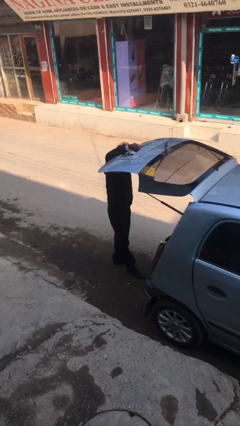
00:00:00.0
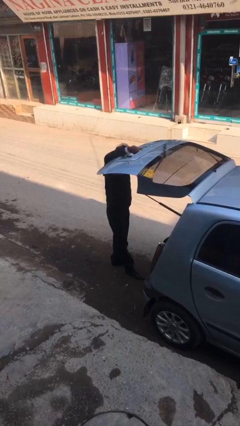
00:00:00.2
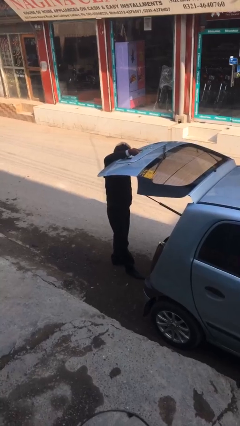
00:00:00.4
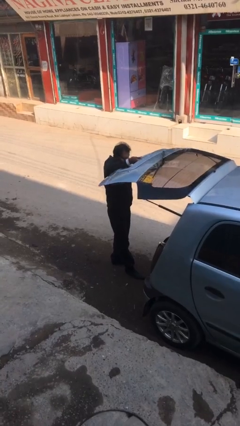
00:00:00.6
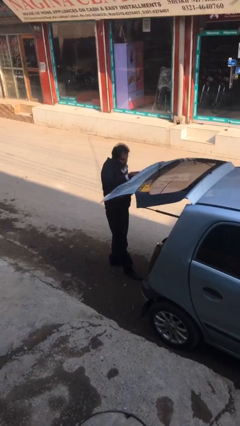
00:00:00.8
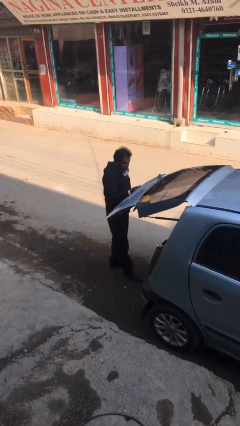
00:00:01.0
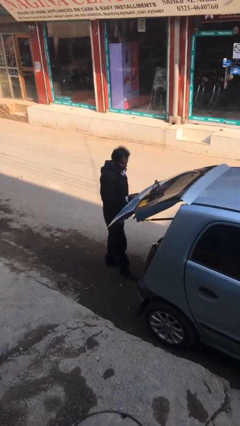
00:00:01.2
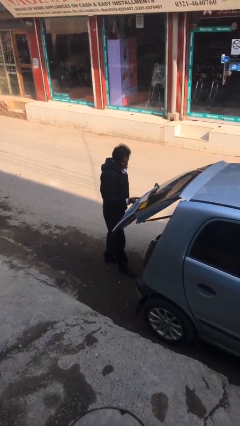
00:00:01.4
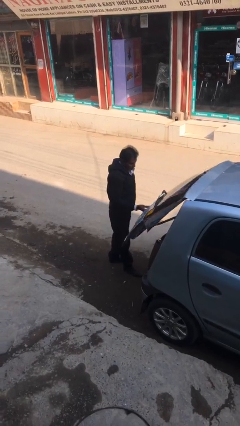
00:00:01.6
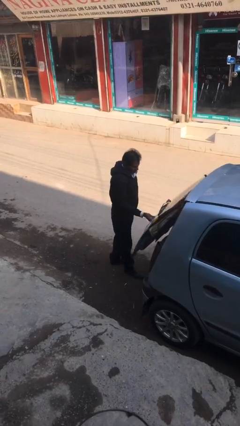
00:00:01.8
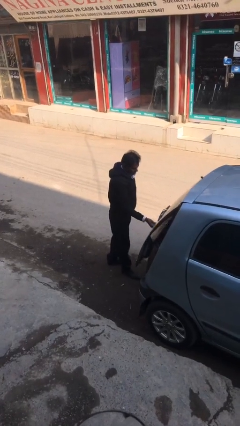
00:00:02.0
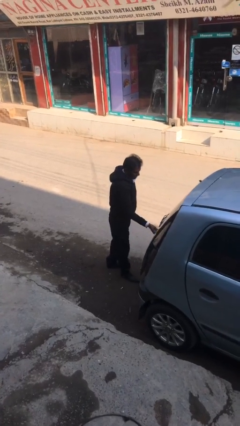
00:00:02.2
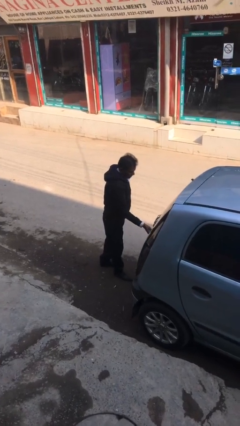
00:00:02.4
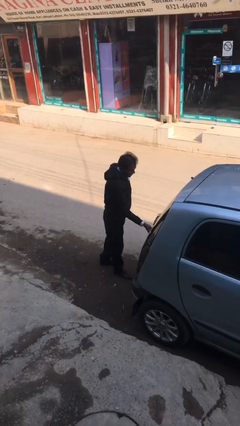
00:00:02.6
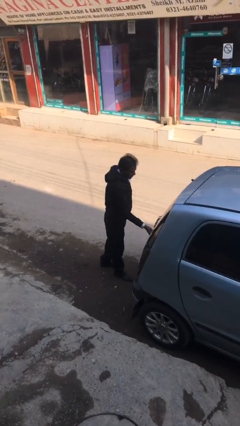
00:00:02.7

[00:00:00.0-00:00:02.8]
person closes car trunk

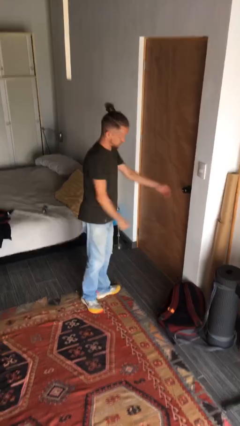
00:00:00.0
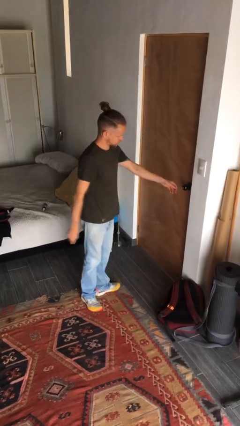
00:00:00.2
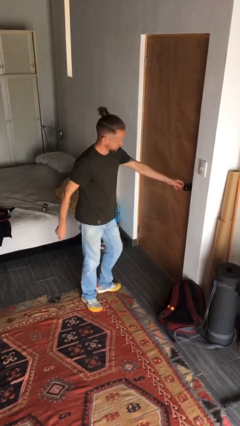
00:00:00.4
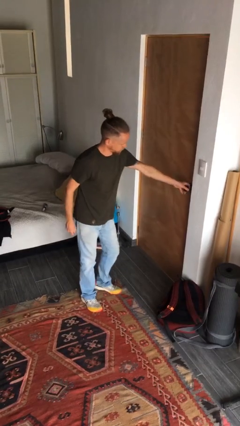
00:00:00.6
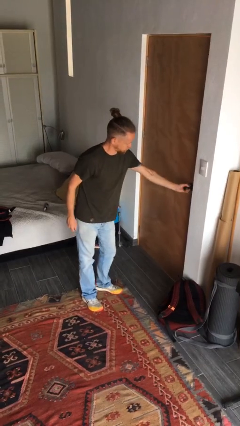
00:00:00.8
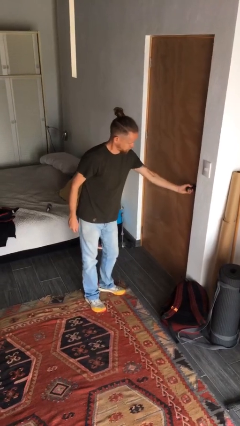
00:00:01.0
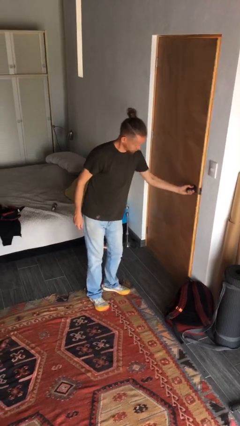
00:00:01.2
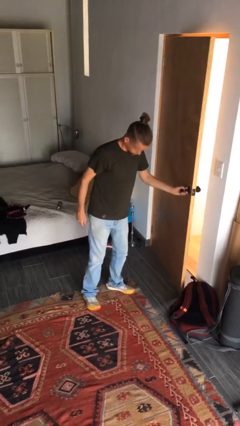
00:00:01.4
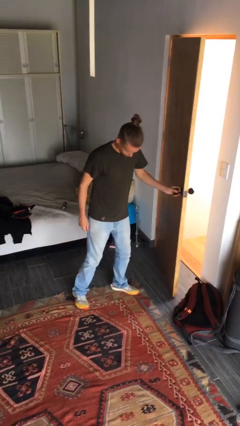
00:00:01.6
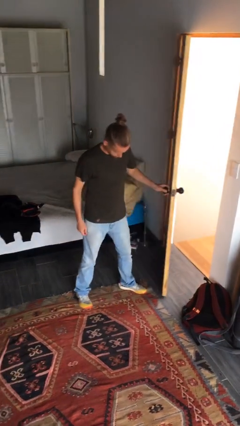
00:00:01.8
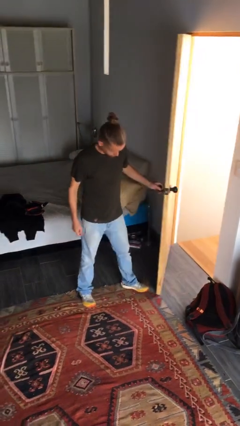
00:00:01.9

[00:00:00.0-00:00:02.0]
person opens facility door

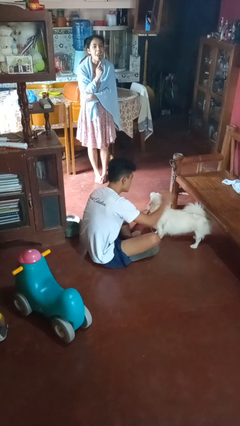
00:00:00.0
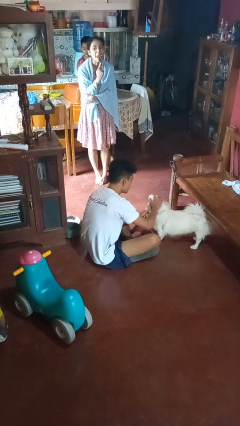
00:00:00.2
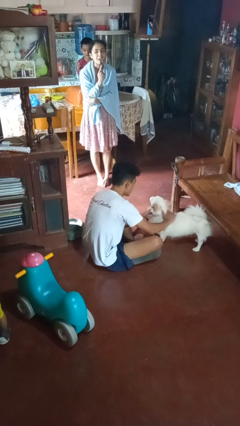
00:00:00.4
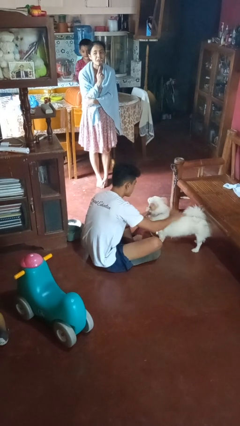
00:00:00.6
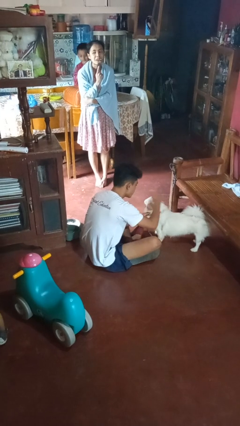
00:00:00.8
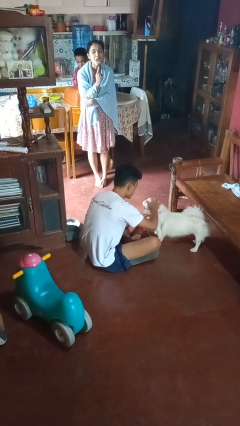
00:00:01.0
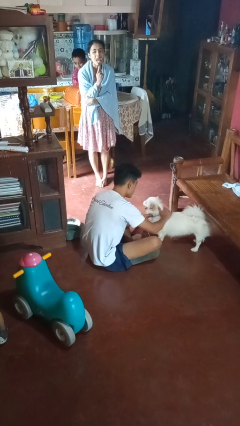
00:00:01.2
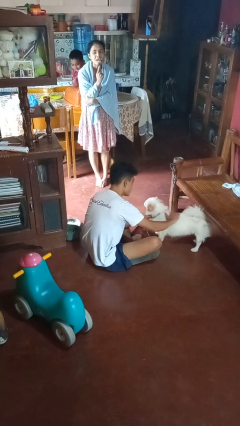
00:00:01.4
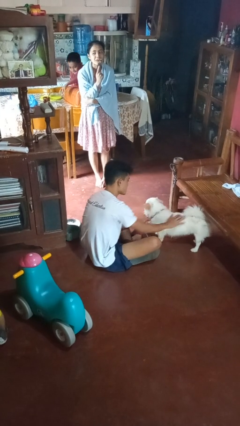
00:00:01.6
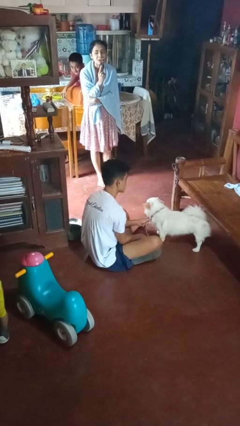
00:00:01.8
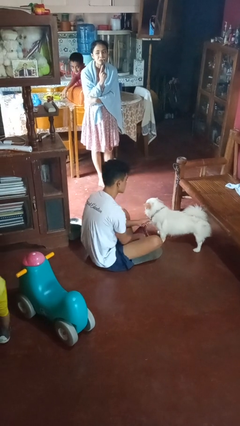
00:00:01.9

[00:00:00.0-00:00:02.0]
person pets dog

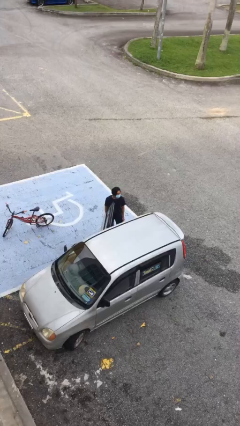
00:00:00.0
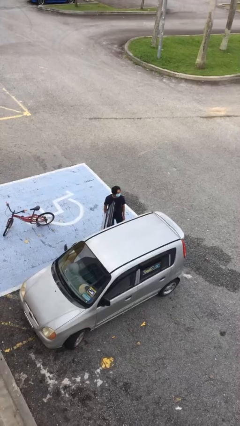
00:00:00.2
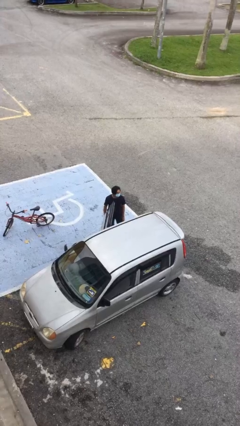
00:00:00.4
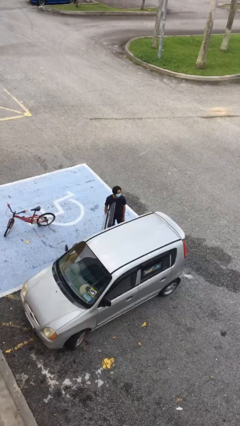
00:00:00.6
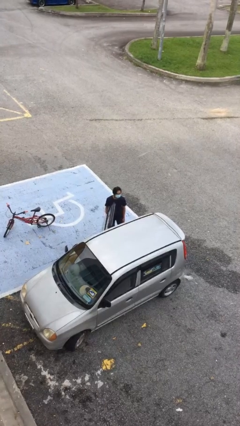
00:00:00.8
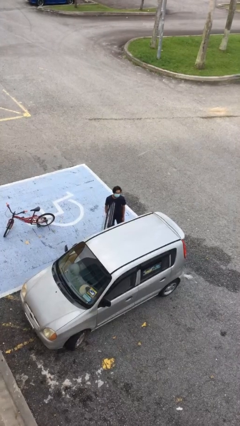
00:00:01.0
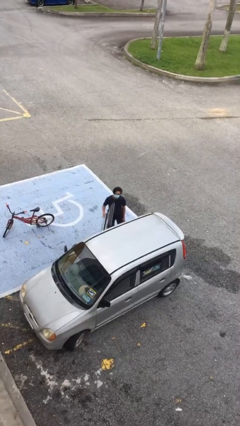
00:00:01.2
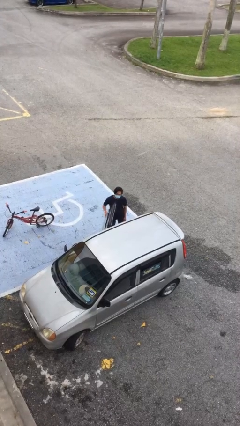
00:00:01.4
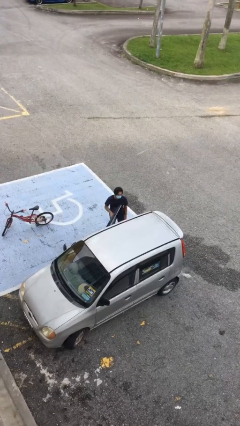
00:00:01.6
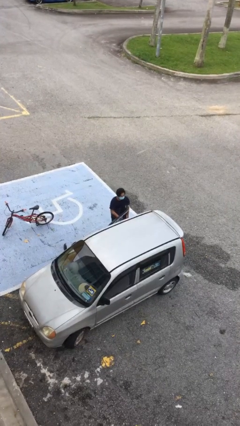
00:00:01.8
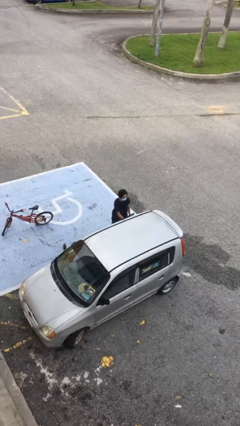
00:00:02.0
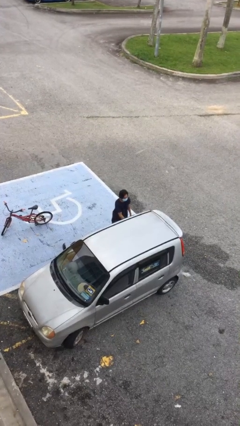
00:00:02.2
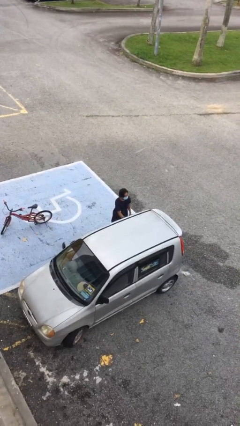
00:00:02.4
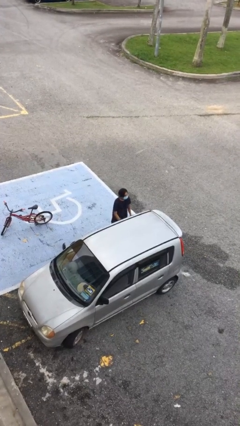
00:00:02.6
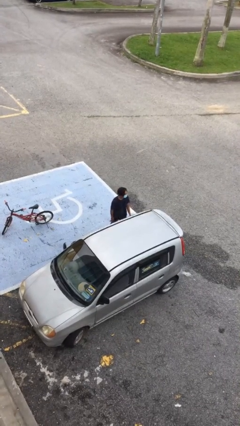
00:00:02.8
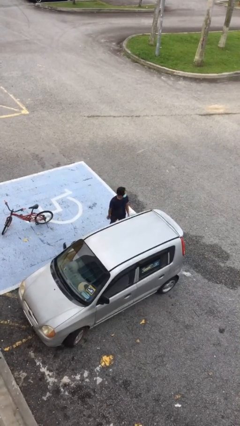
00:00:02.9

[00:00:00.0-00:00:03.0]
person closes car door

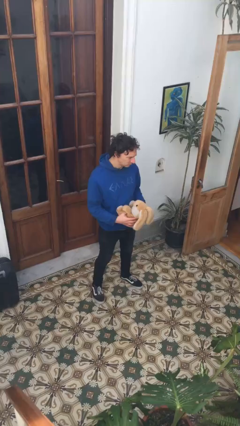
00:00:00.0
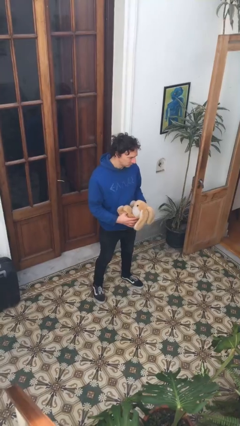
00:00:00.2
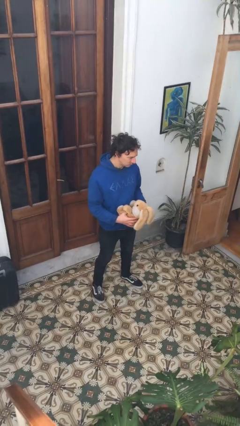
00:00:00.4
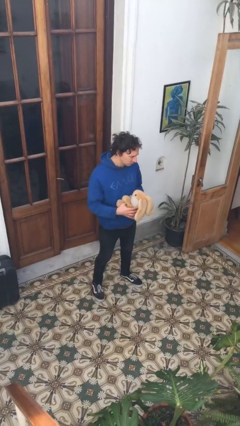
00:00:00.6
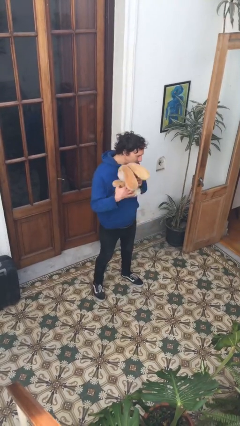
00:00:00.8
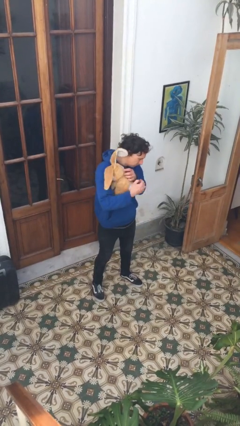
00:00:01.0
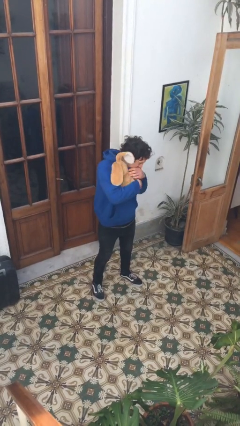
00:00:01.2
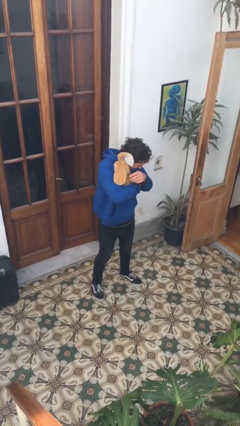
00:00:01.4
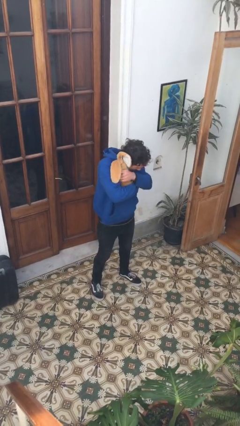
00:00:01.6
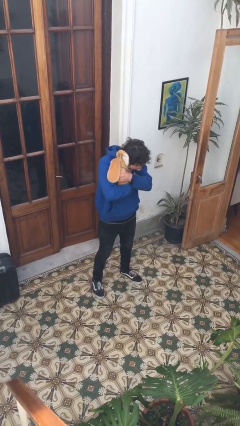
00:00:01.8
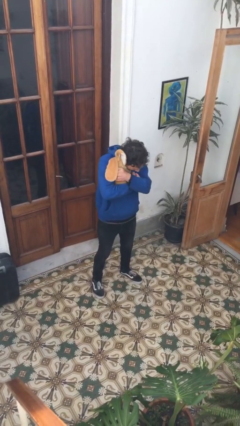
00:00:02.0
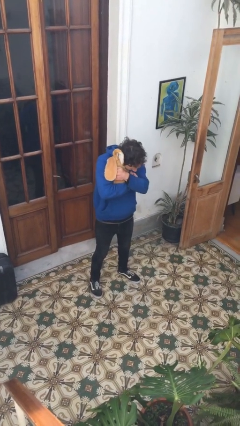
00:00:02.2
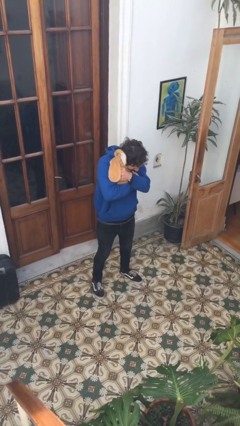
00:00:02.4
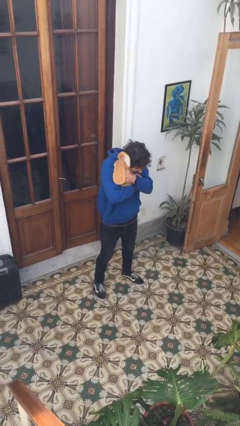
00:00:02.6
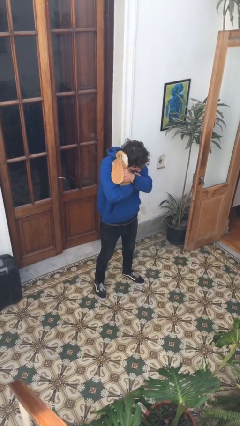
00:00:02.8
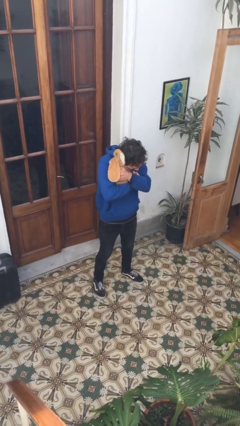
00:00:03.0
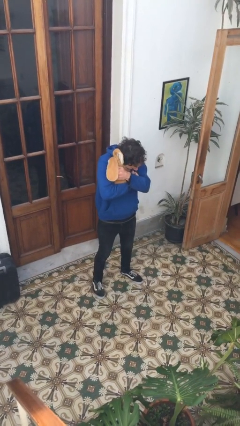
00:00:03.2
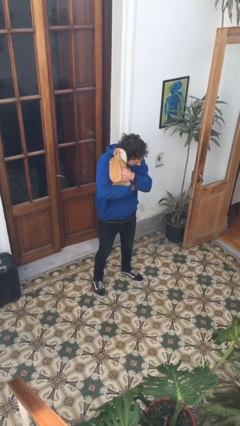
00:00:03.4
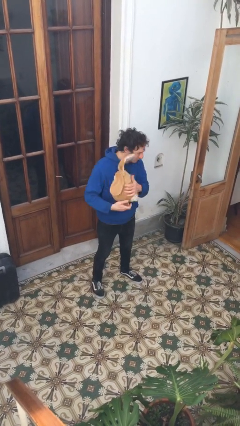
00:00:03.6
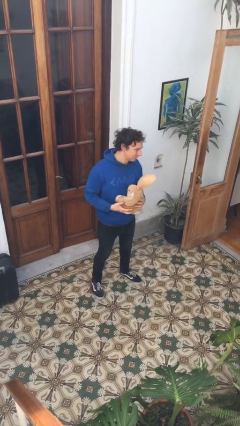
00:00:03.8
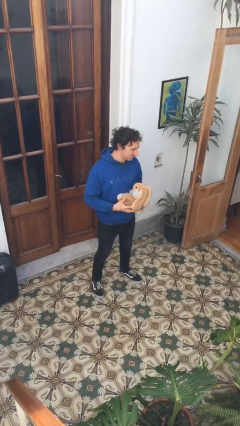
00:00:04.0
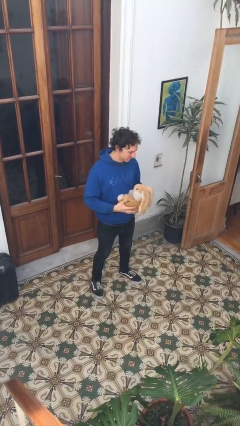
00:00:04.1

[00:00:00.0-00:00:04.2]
person hugs stuffed animal

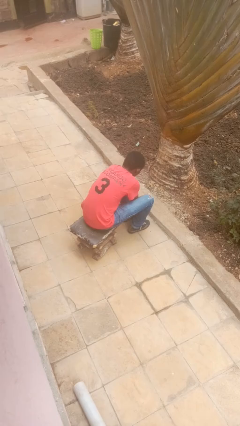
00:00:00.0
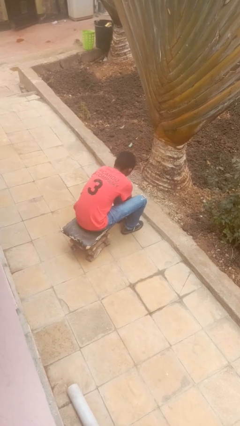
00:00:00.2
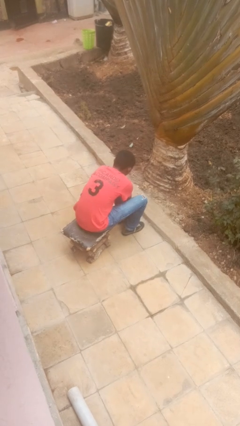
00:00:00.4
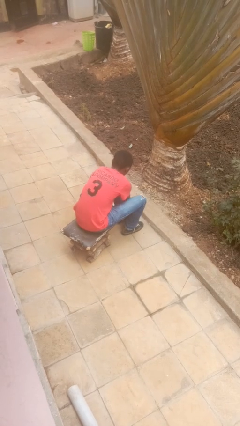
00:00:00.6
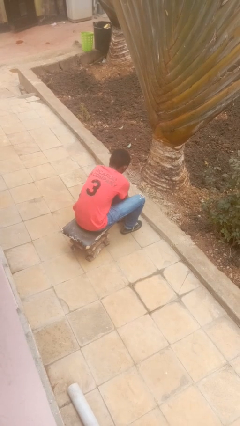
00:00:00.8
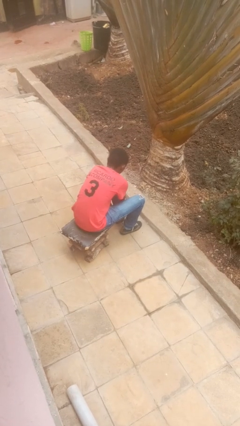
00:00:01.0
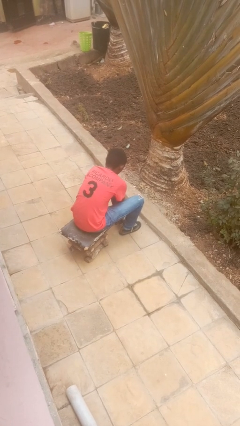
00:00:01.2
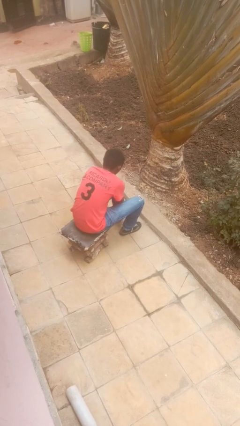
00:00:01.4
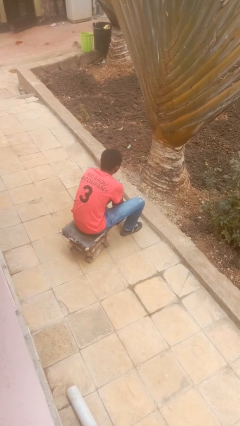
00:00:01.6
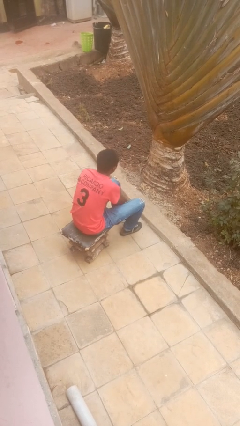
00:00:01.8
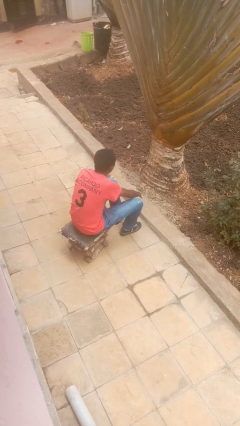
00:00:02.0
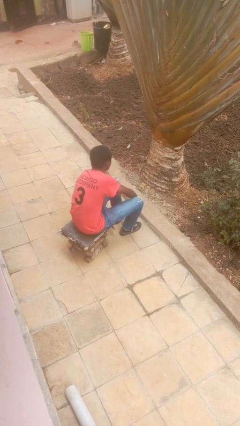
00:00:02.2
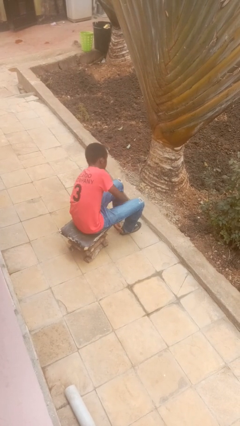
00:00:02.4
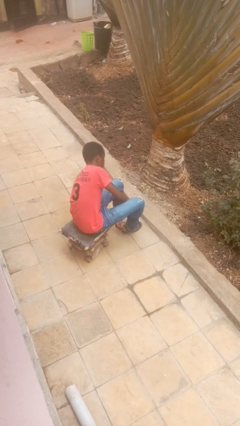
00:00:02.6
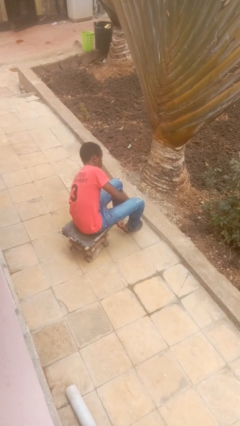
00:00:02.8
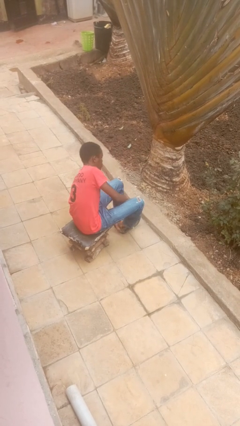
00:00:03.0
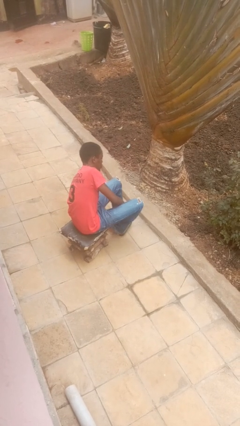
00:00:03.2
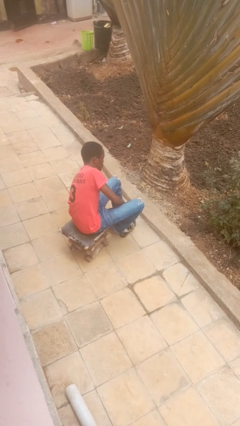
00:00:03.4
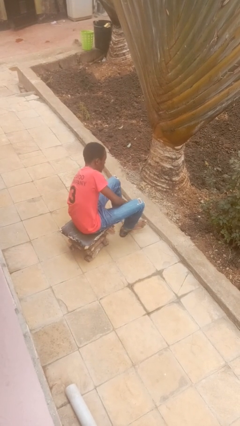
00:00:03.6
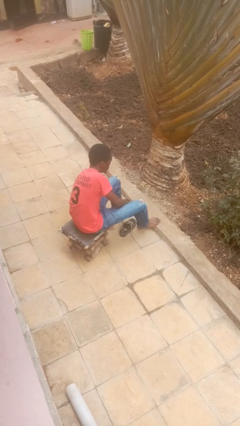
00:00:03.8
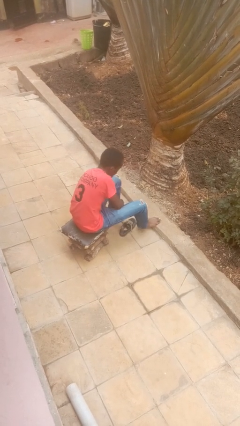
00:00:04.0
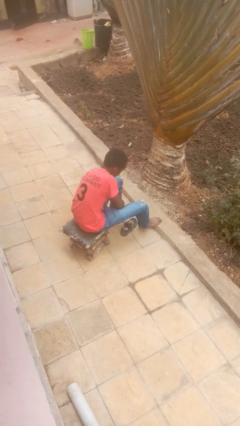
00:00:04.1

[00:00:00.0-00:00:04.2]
person takes off shoes
